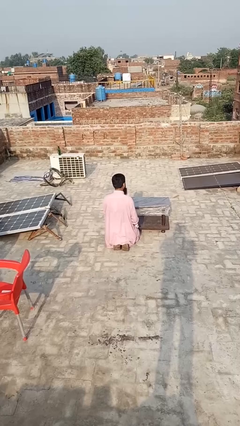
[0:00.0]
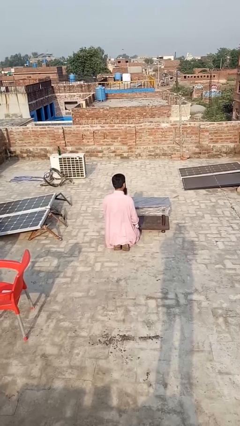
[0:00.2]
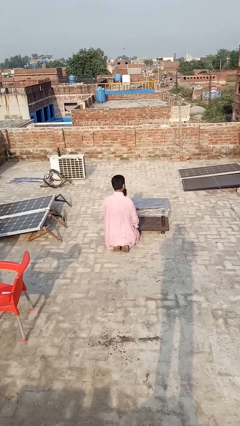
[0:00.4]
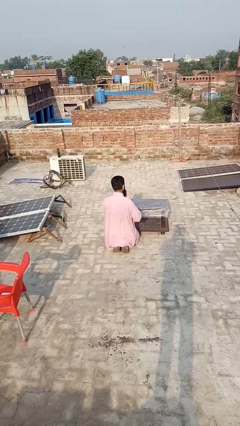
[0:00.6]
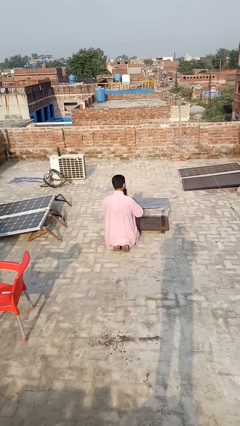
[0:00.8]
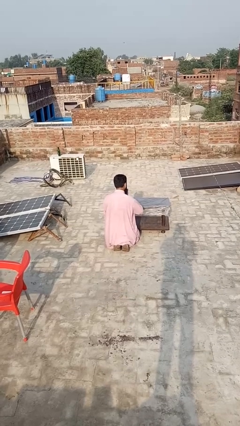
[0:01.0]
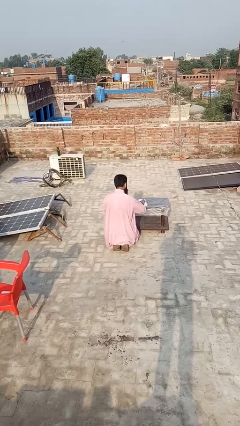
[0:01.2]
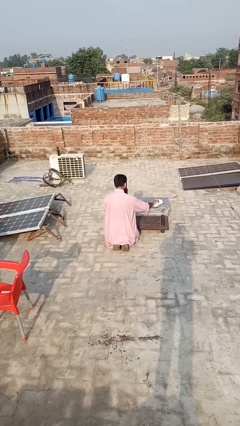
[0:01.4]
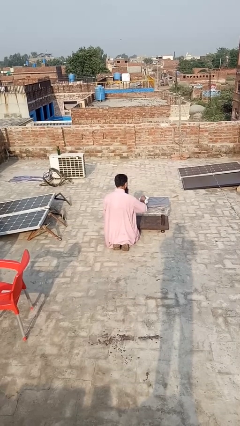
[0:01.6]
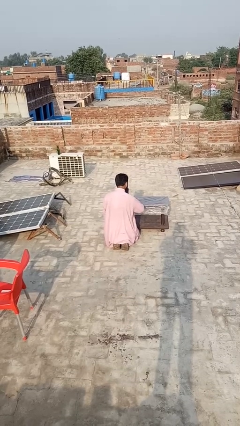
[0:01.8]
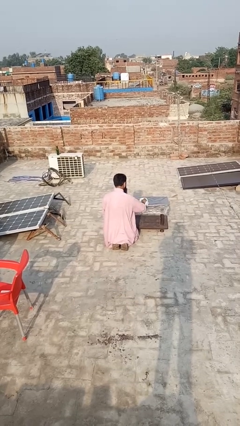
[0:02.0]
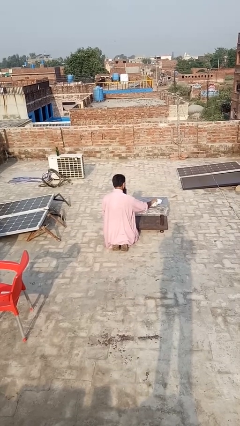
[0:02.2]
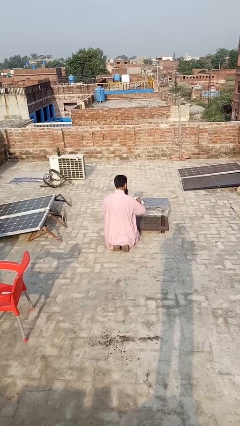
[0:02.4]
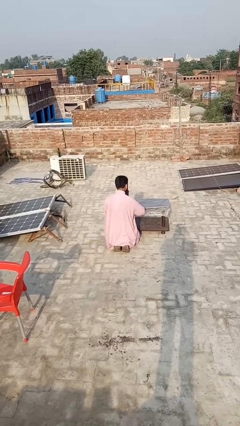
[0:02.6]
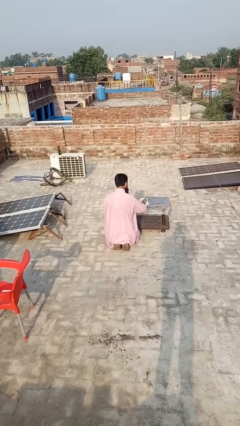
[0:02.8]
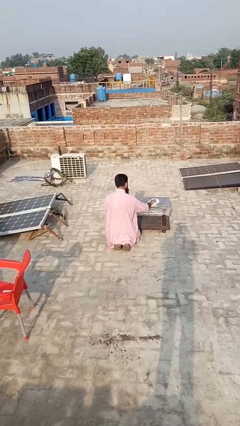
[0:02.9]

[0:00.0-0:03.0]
person cleans table with rag

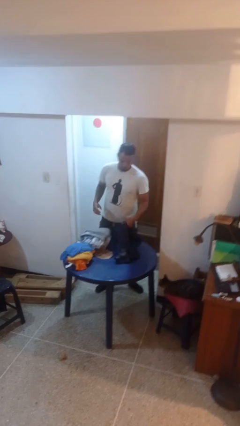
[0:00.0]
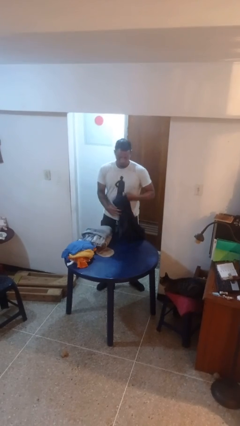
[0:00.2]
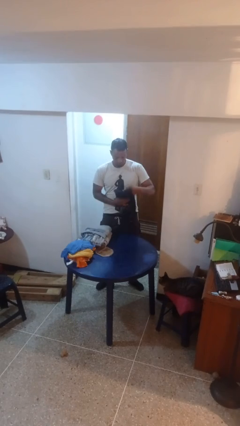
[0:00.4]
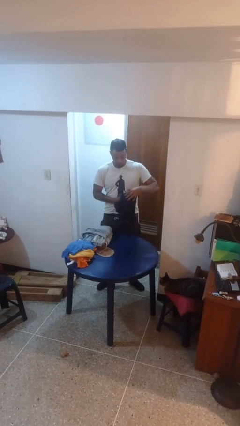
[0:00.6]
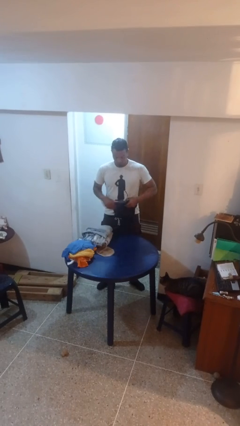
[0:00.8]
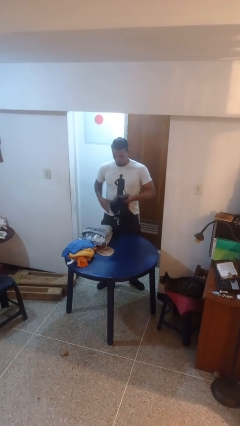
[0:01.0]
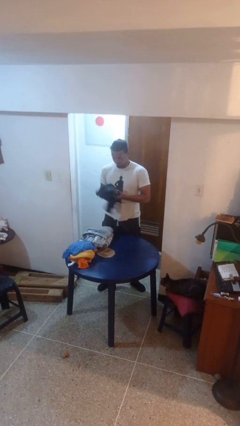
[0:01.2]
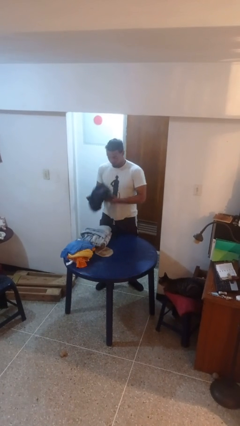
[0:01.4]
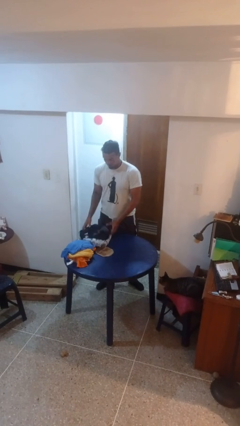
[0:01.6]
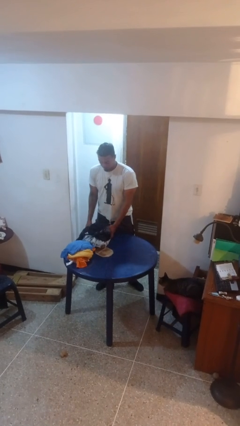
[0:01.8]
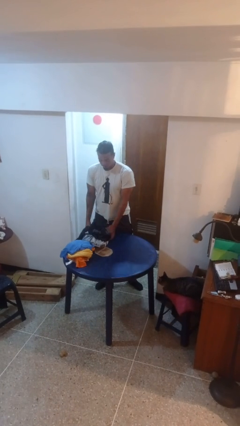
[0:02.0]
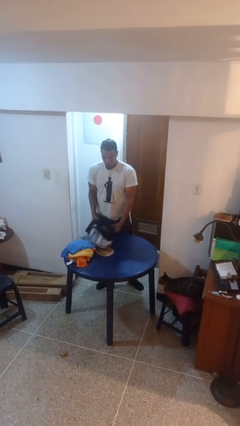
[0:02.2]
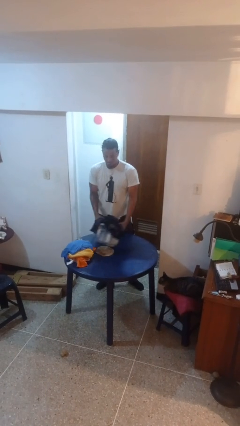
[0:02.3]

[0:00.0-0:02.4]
person folds pants

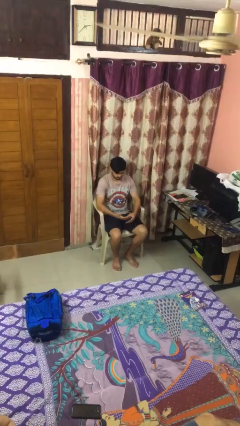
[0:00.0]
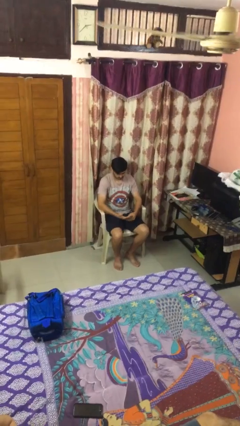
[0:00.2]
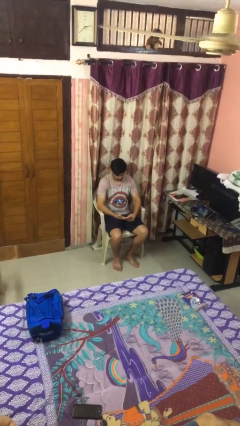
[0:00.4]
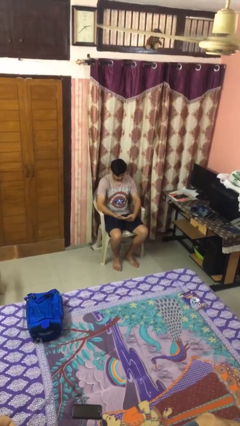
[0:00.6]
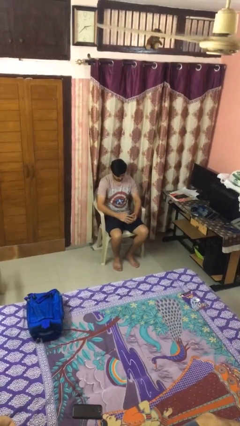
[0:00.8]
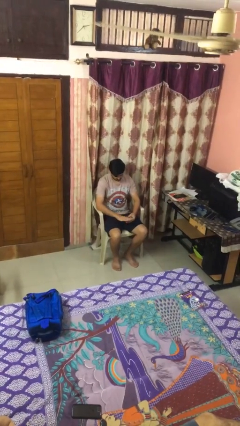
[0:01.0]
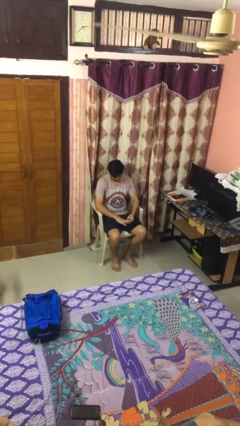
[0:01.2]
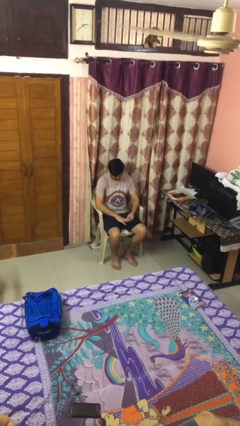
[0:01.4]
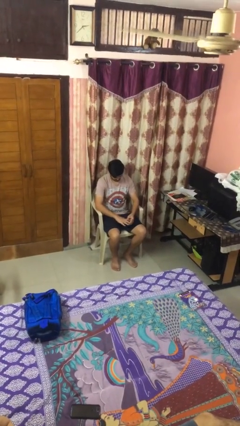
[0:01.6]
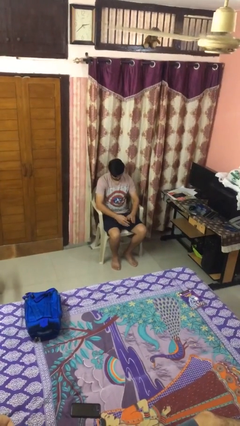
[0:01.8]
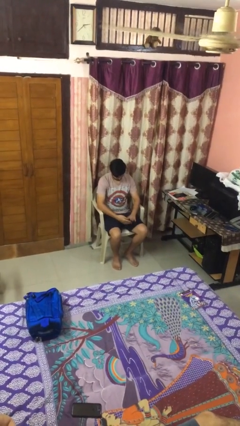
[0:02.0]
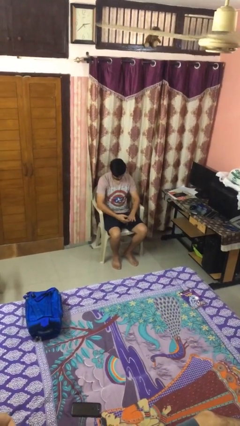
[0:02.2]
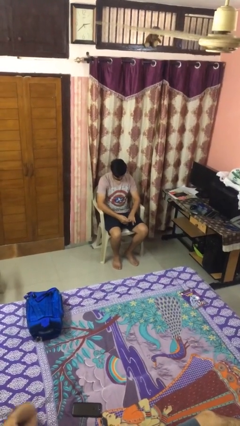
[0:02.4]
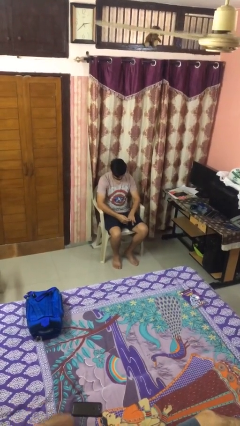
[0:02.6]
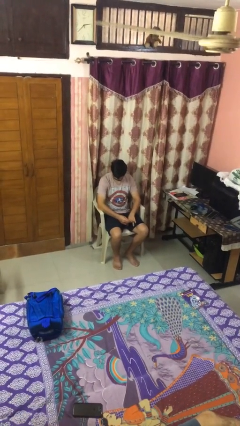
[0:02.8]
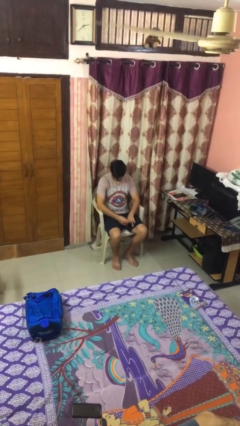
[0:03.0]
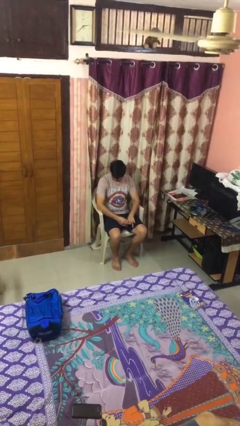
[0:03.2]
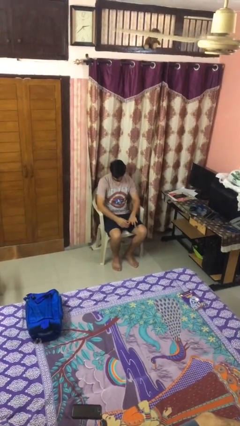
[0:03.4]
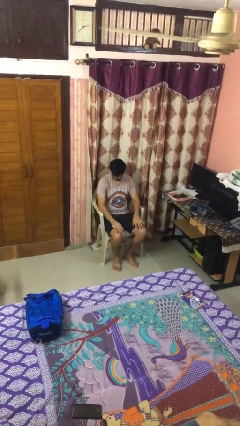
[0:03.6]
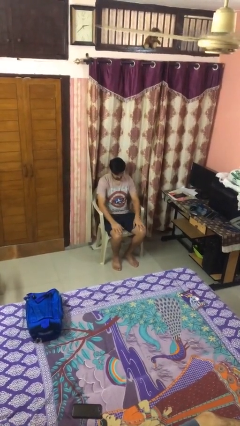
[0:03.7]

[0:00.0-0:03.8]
person looks at hands in lap

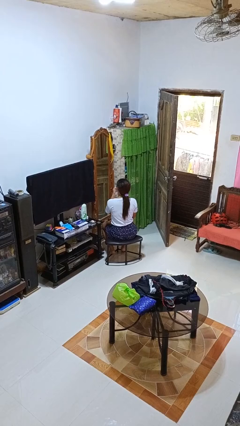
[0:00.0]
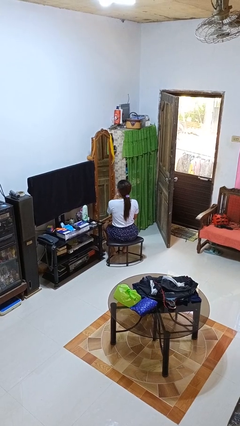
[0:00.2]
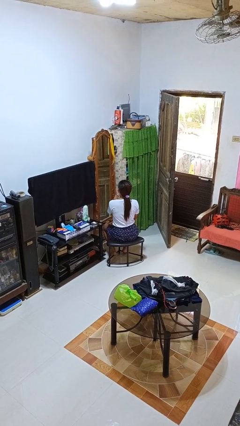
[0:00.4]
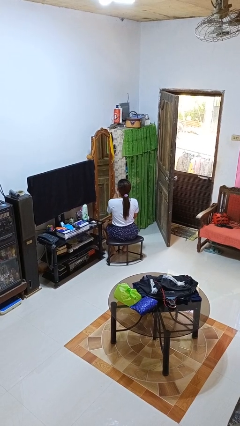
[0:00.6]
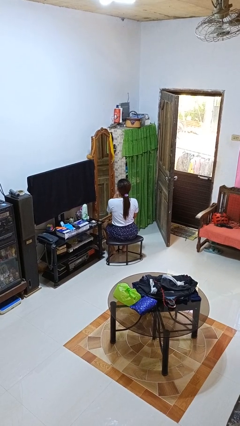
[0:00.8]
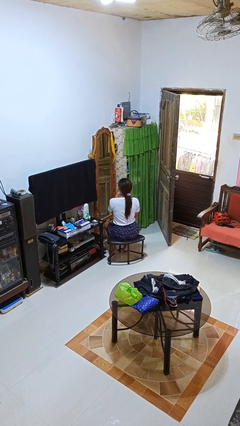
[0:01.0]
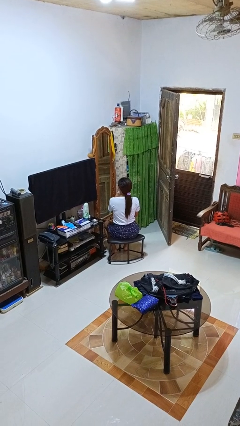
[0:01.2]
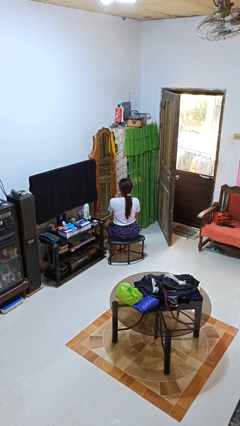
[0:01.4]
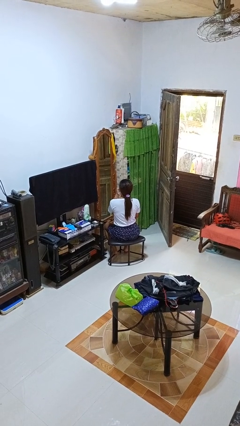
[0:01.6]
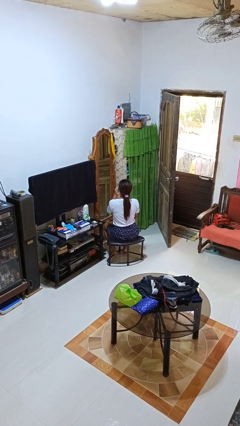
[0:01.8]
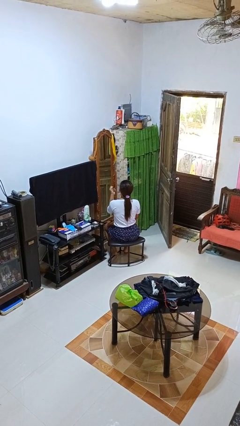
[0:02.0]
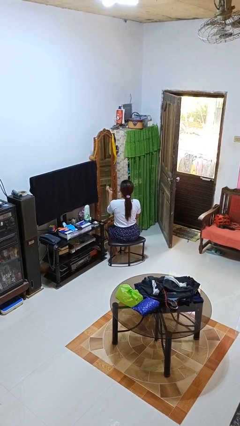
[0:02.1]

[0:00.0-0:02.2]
person applies lip makeup

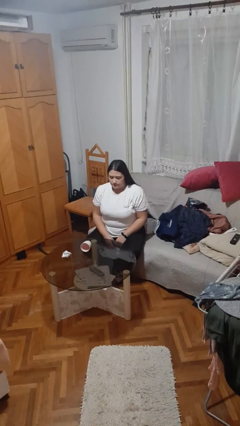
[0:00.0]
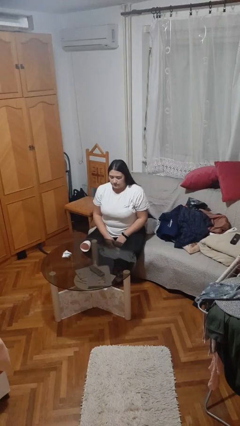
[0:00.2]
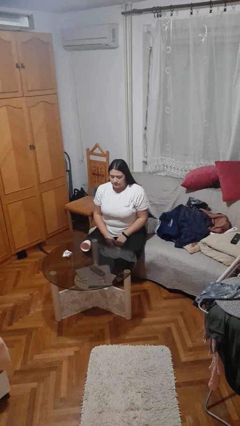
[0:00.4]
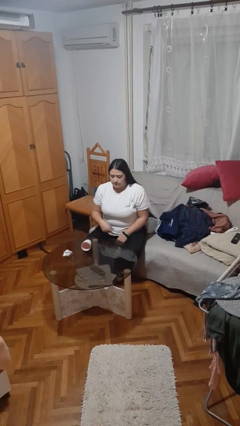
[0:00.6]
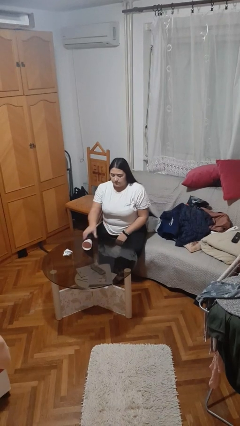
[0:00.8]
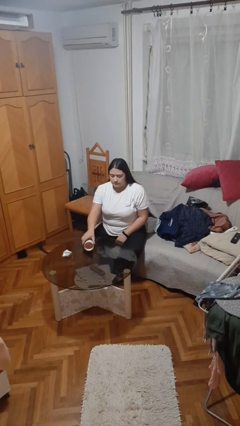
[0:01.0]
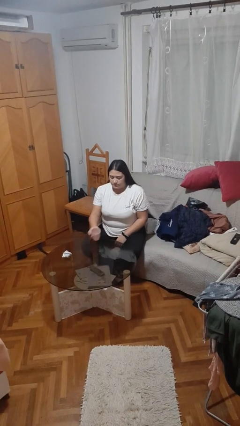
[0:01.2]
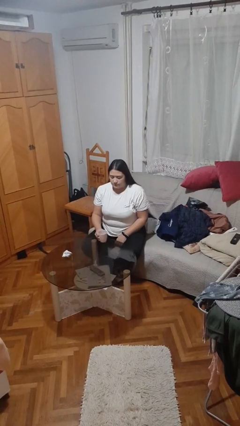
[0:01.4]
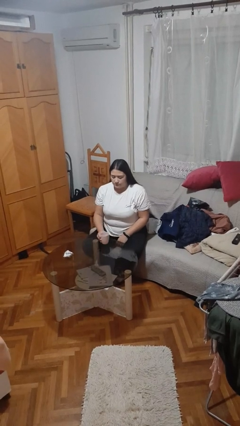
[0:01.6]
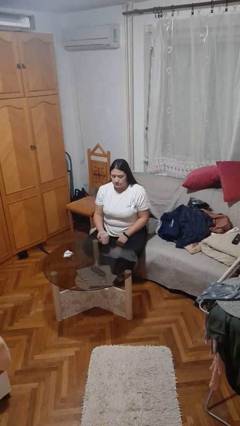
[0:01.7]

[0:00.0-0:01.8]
person sets upright glass

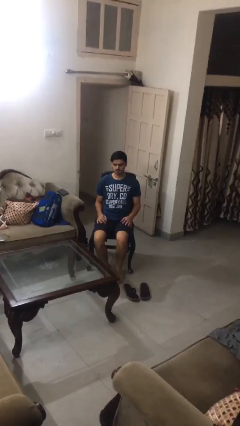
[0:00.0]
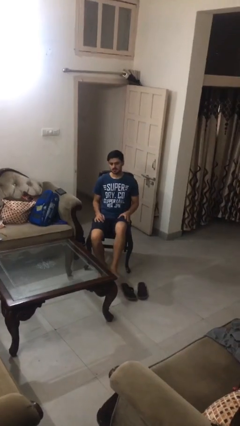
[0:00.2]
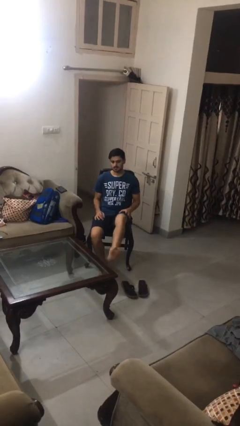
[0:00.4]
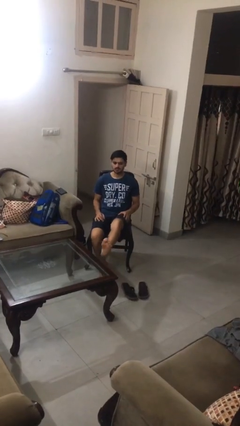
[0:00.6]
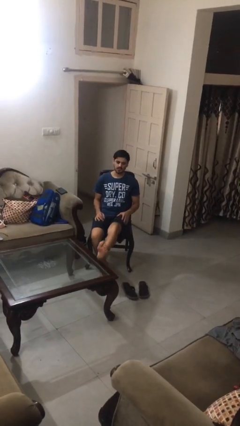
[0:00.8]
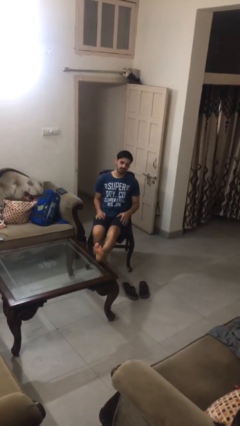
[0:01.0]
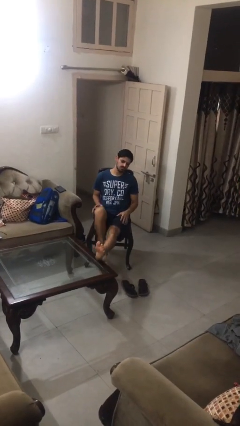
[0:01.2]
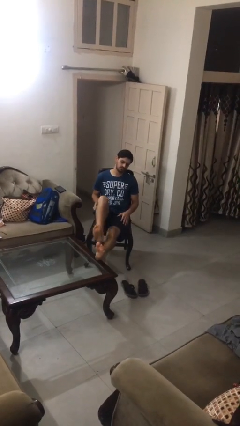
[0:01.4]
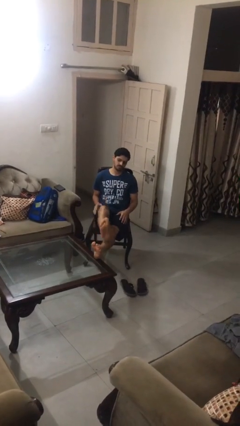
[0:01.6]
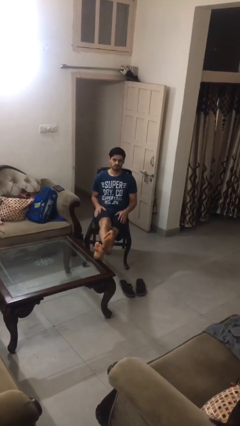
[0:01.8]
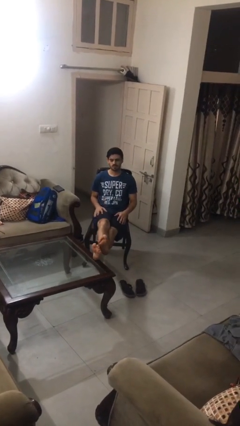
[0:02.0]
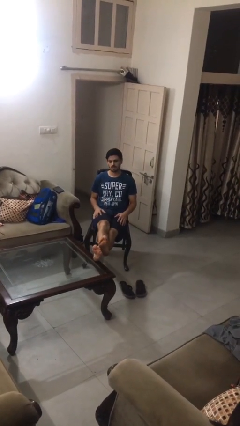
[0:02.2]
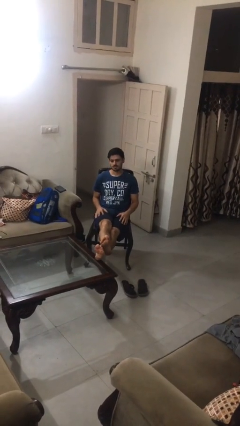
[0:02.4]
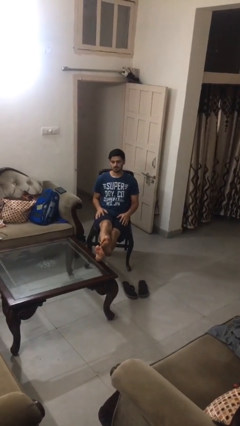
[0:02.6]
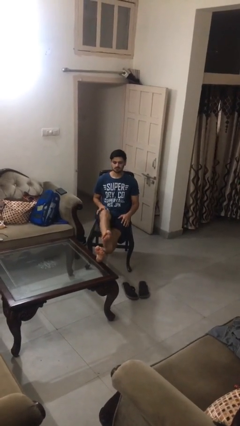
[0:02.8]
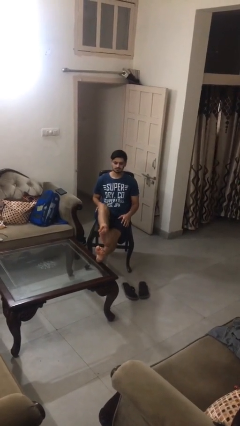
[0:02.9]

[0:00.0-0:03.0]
person puts feet up

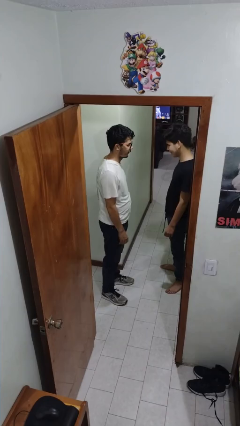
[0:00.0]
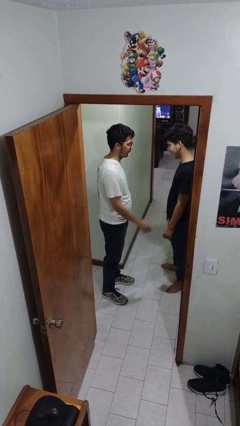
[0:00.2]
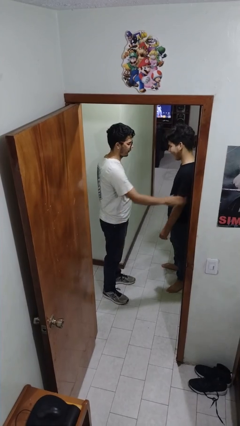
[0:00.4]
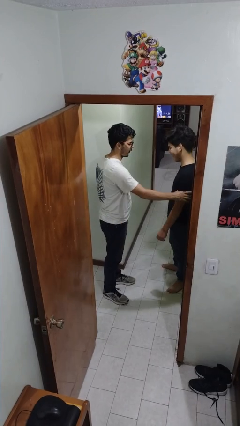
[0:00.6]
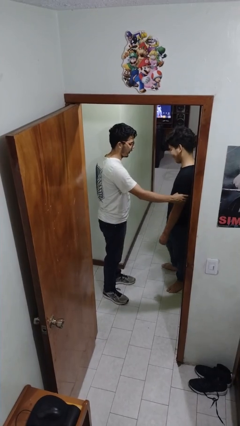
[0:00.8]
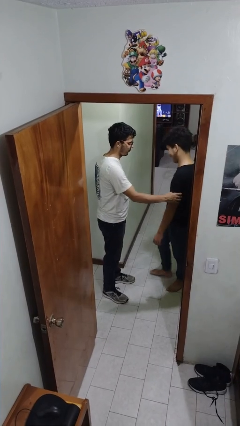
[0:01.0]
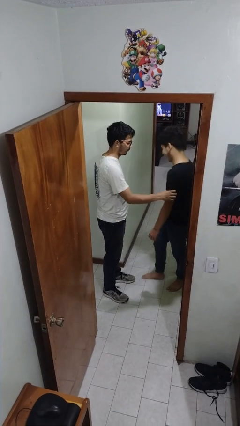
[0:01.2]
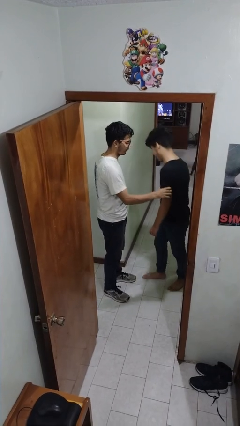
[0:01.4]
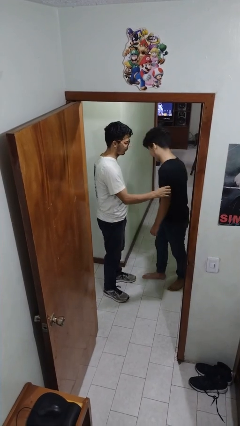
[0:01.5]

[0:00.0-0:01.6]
person grabs person by bicep
